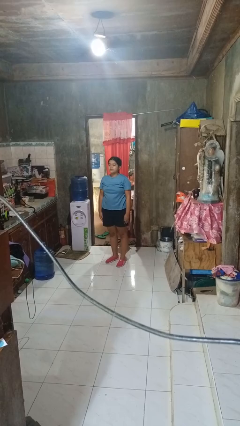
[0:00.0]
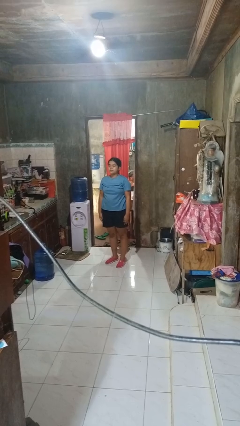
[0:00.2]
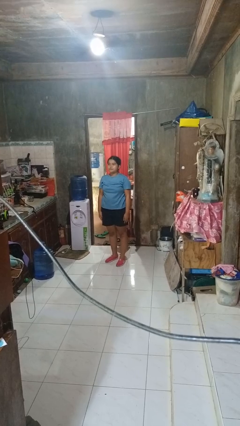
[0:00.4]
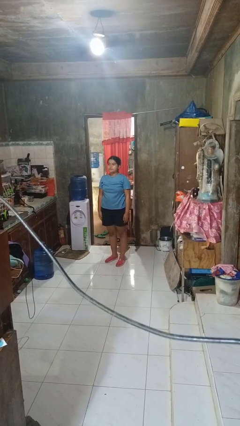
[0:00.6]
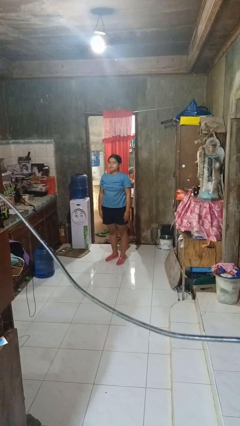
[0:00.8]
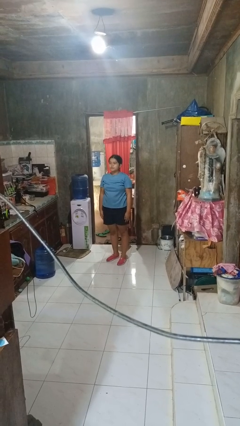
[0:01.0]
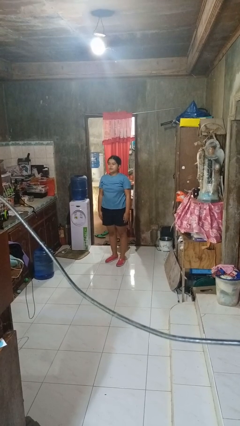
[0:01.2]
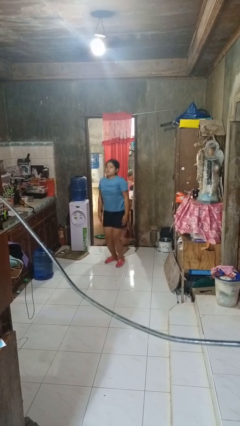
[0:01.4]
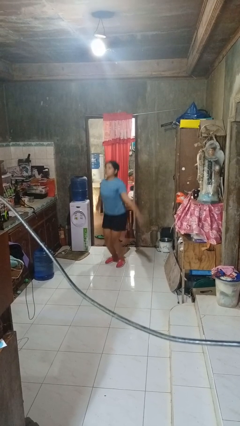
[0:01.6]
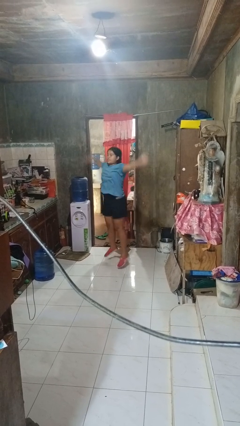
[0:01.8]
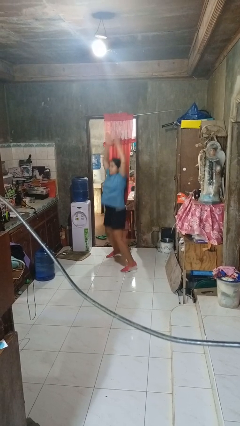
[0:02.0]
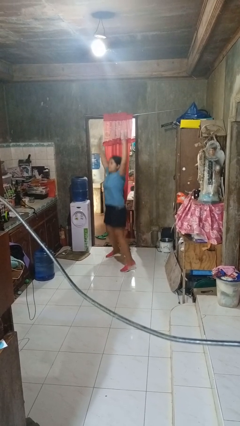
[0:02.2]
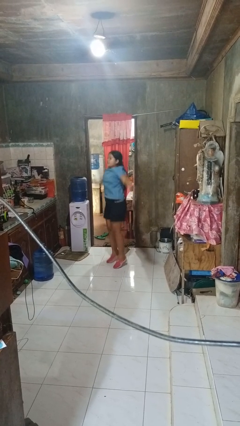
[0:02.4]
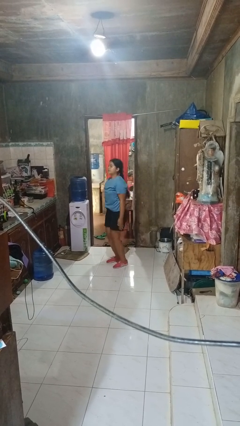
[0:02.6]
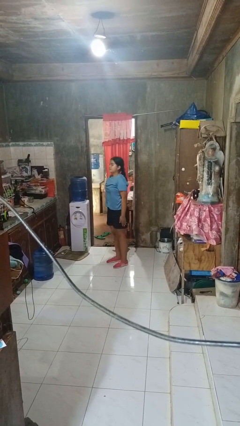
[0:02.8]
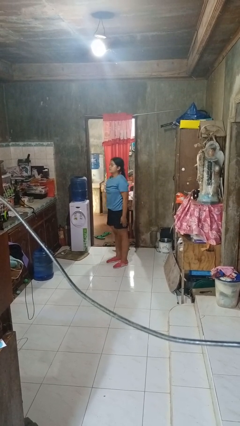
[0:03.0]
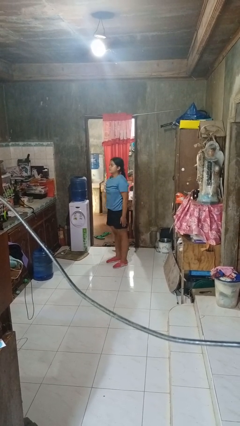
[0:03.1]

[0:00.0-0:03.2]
person exercises with jumping jacks

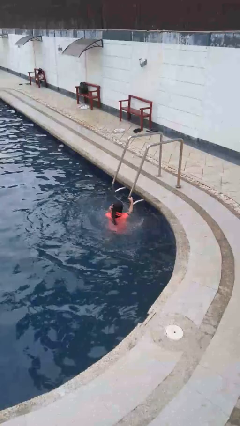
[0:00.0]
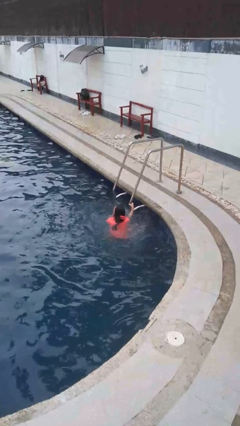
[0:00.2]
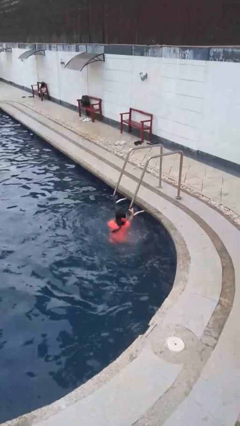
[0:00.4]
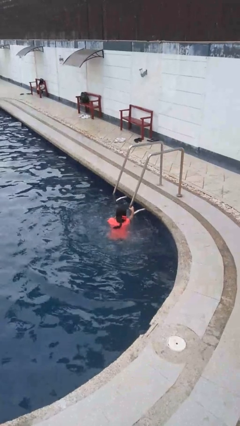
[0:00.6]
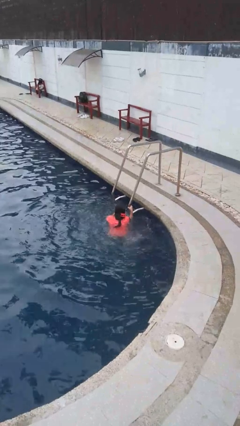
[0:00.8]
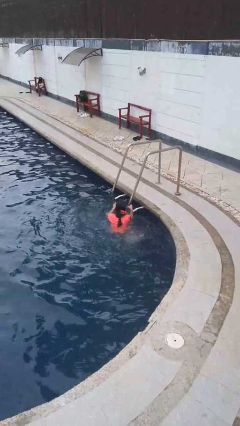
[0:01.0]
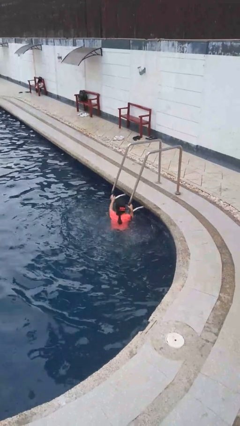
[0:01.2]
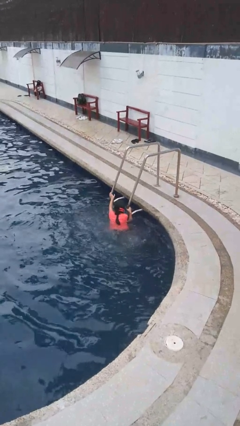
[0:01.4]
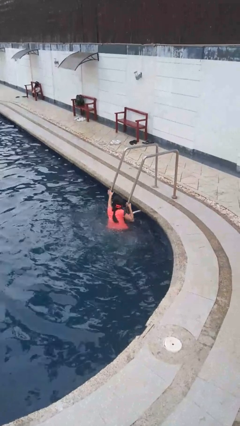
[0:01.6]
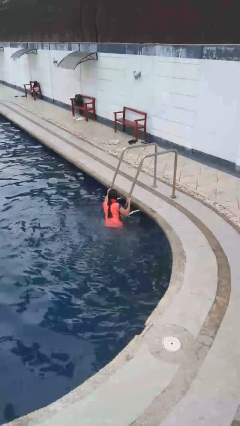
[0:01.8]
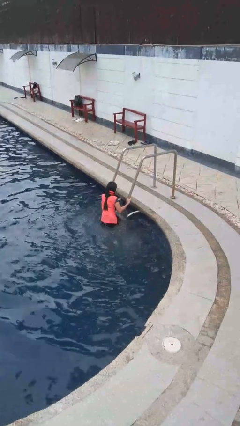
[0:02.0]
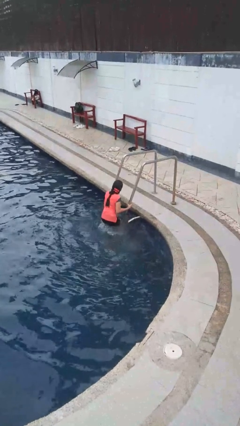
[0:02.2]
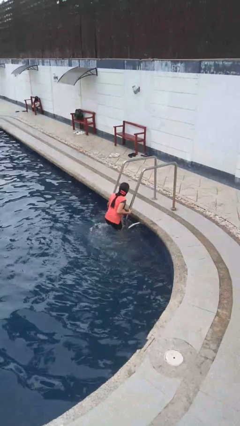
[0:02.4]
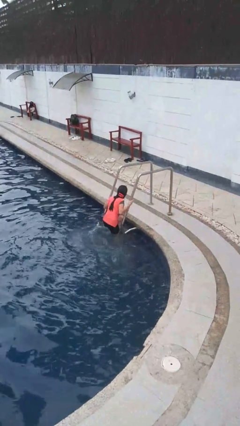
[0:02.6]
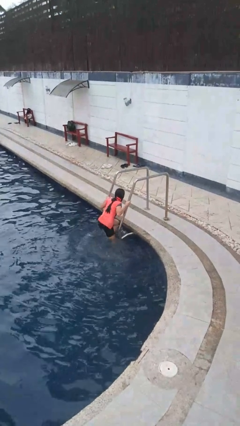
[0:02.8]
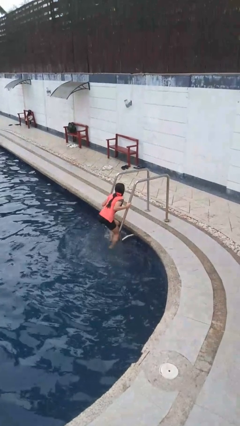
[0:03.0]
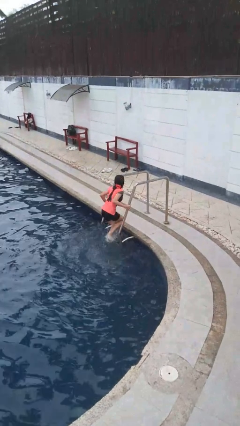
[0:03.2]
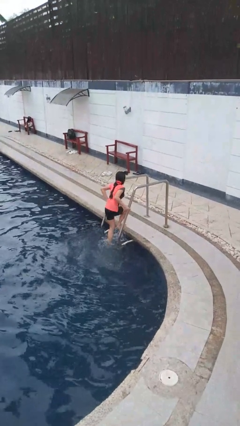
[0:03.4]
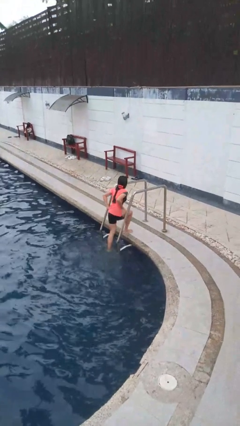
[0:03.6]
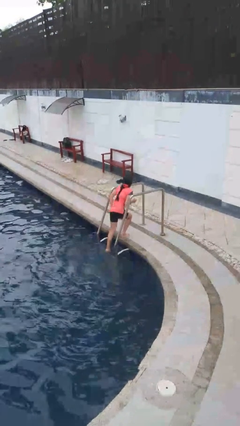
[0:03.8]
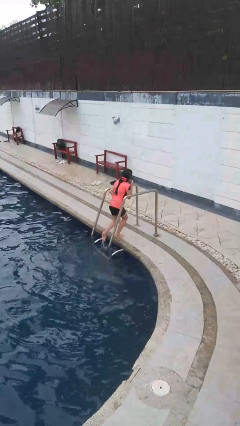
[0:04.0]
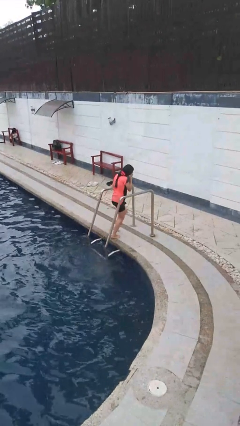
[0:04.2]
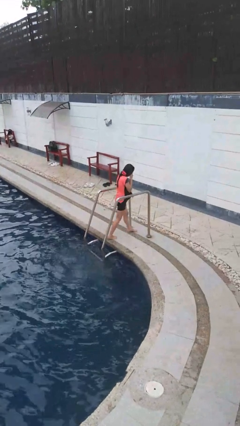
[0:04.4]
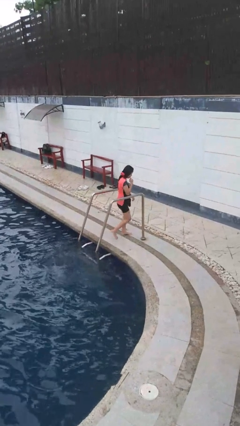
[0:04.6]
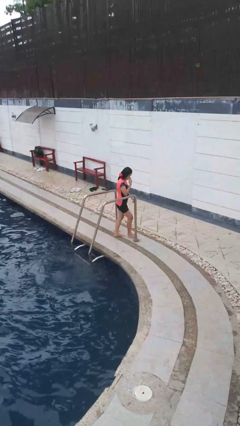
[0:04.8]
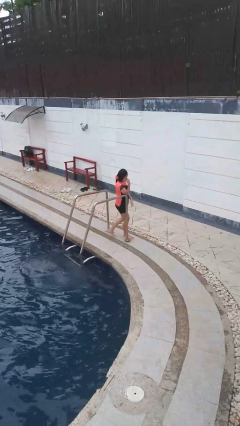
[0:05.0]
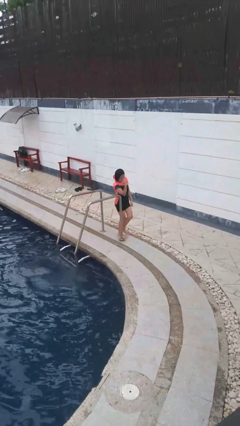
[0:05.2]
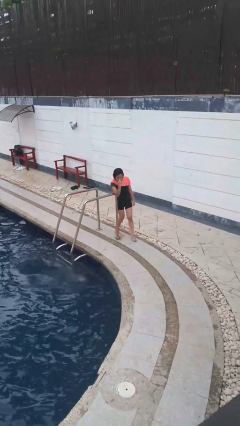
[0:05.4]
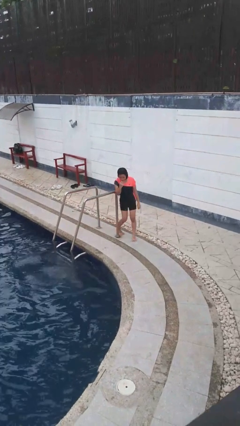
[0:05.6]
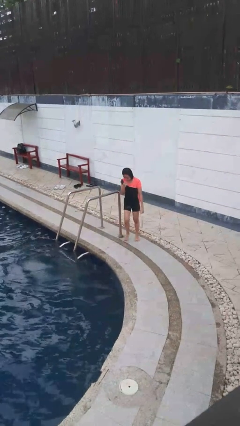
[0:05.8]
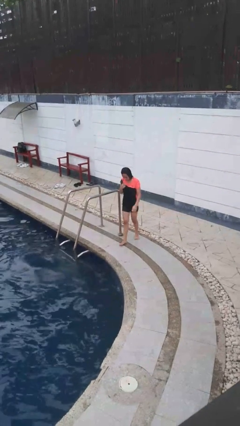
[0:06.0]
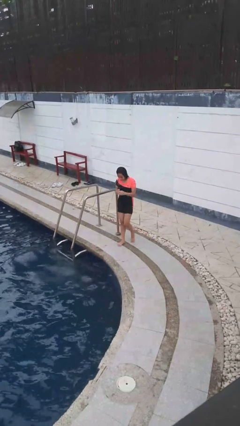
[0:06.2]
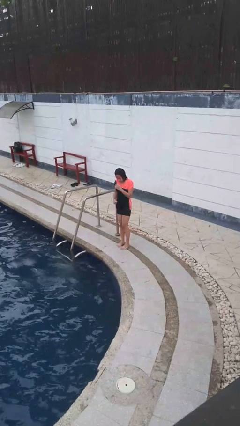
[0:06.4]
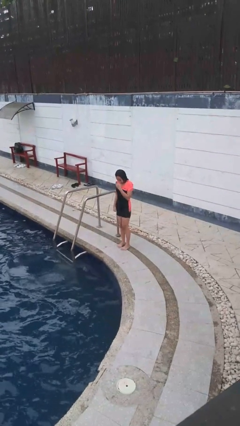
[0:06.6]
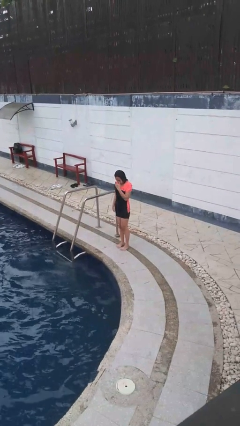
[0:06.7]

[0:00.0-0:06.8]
person exits pool

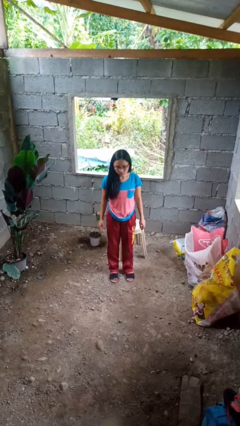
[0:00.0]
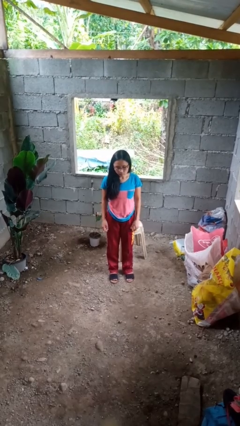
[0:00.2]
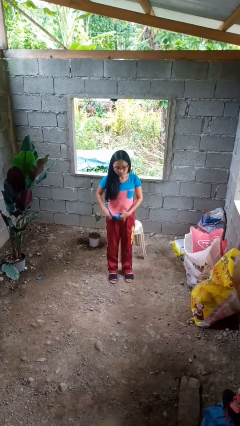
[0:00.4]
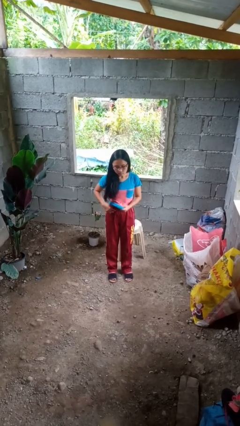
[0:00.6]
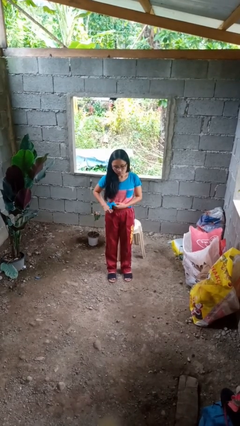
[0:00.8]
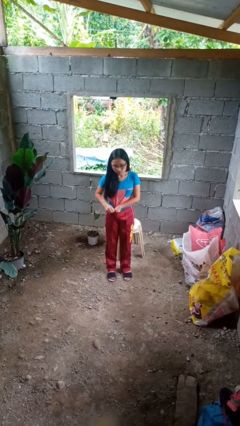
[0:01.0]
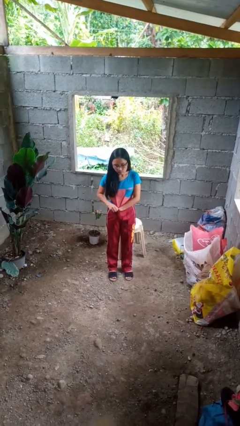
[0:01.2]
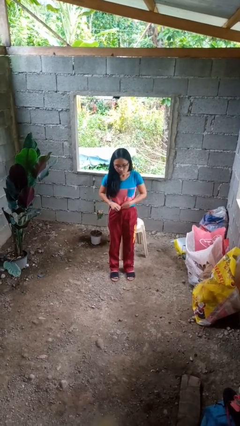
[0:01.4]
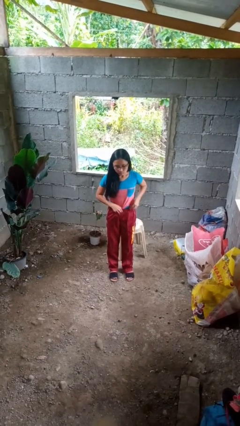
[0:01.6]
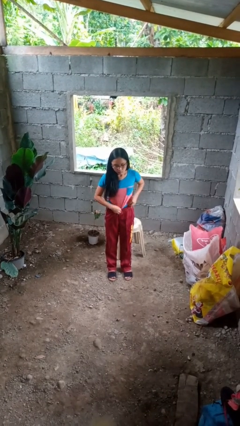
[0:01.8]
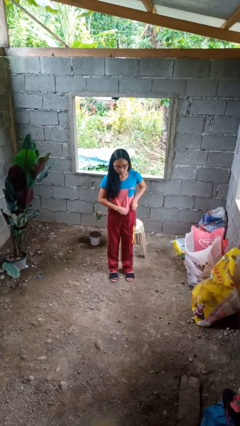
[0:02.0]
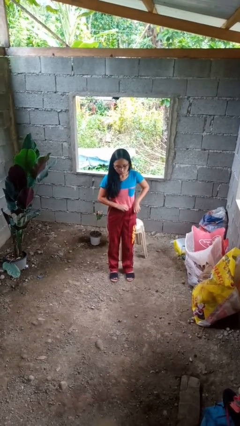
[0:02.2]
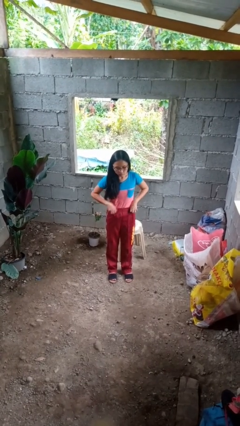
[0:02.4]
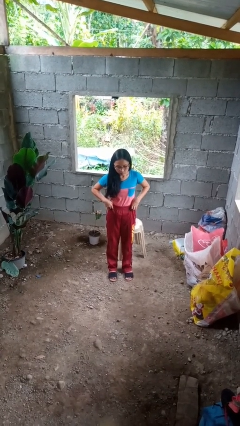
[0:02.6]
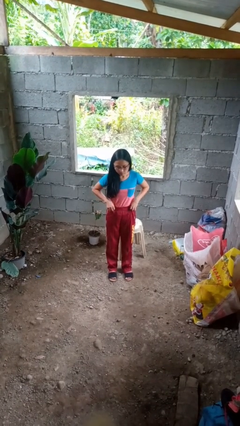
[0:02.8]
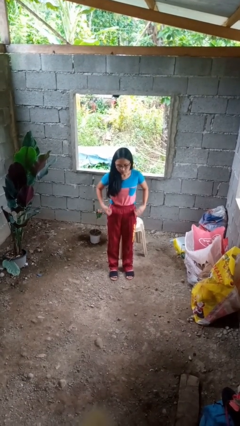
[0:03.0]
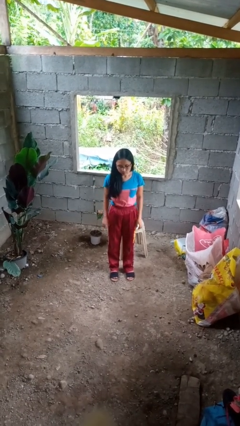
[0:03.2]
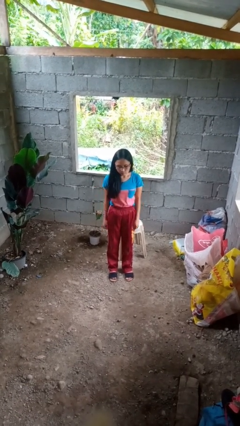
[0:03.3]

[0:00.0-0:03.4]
person tucks in shirt

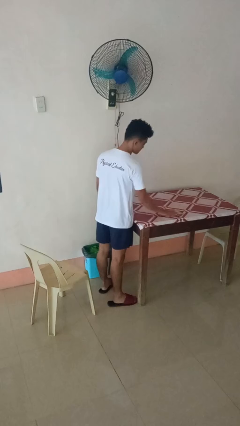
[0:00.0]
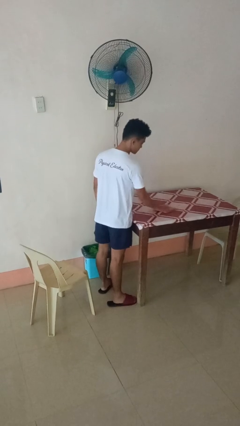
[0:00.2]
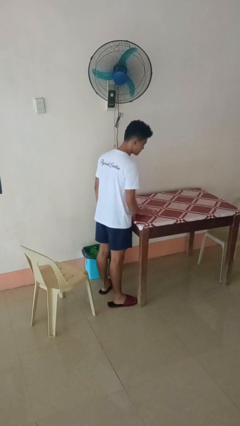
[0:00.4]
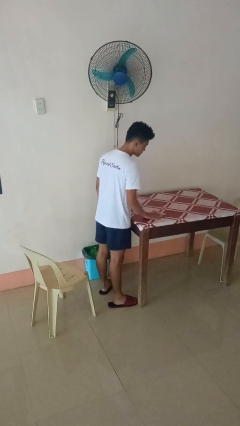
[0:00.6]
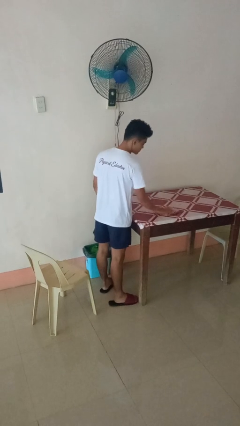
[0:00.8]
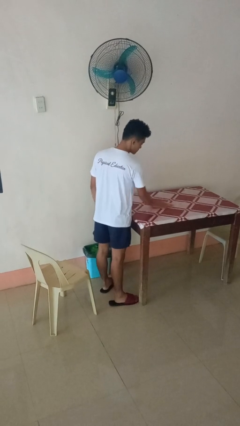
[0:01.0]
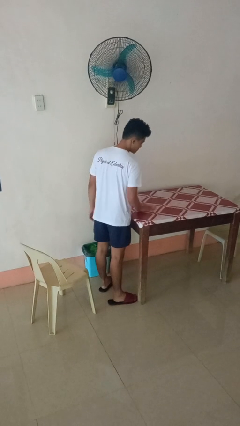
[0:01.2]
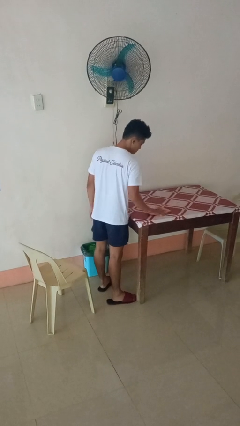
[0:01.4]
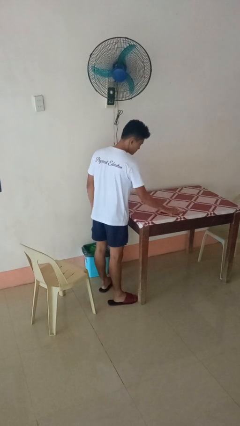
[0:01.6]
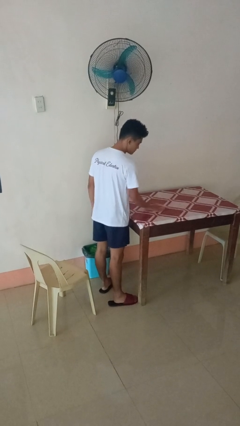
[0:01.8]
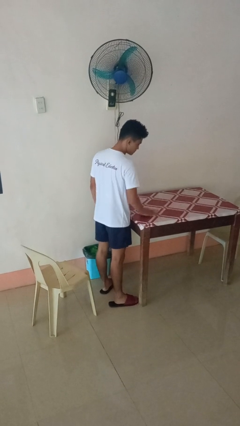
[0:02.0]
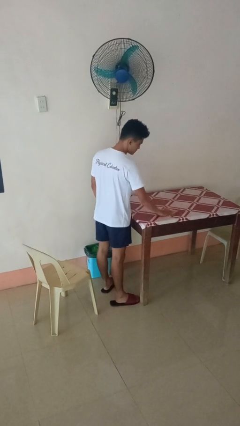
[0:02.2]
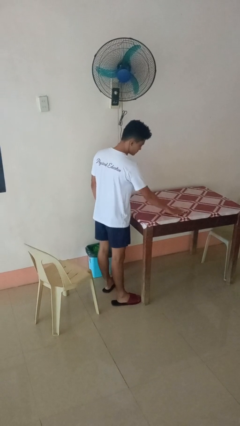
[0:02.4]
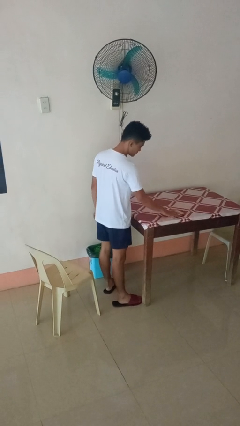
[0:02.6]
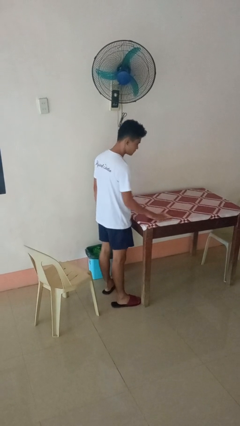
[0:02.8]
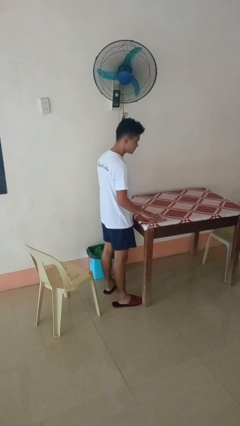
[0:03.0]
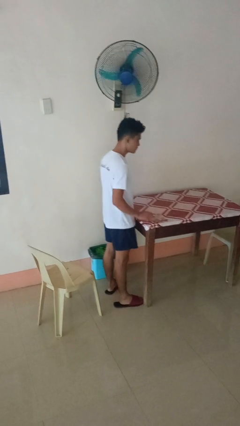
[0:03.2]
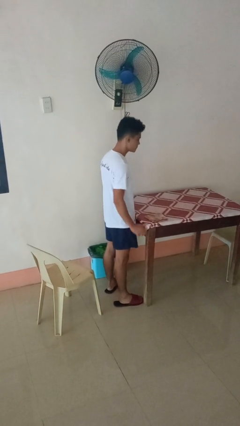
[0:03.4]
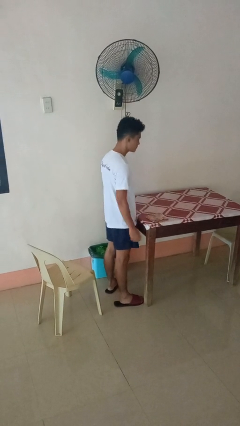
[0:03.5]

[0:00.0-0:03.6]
person cleans table with rag

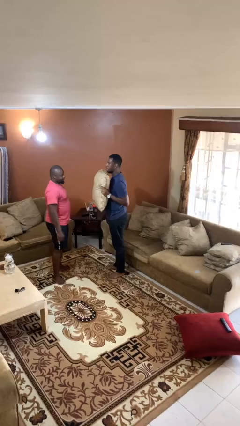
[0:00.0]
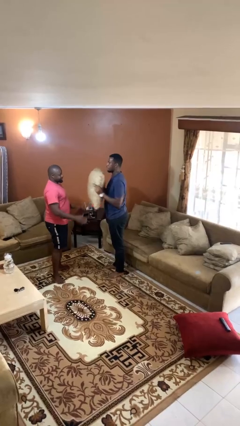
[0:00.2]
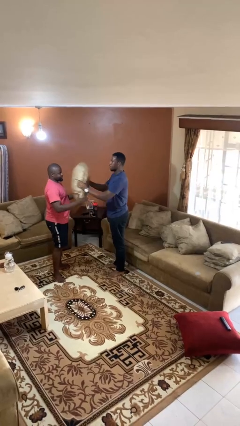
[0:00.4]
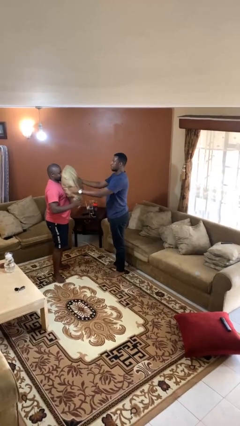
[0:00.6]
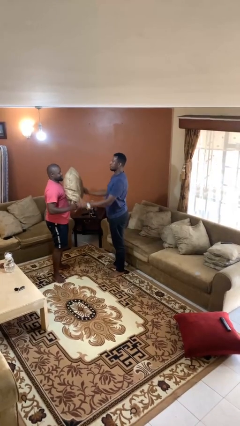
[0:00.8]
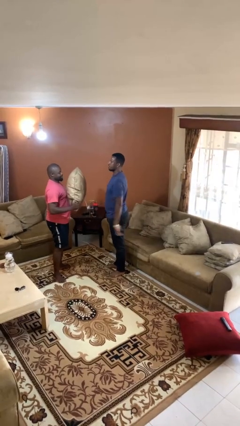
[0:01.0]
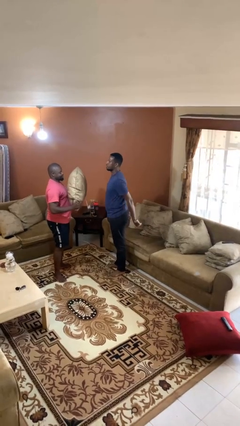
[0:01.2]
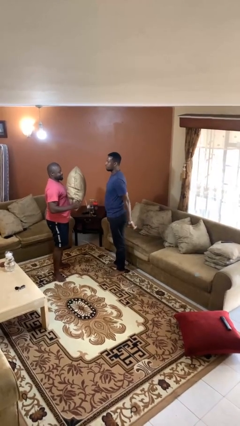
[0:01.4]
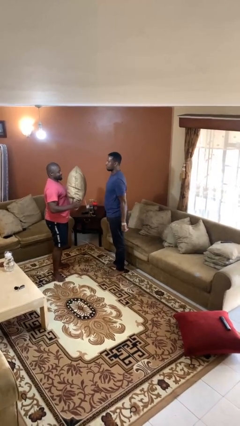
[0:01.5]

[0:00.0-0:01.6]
person transfers object to person
